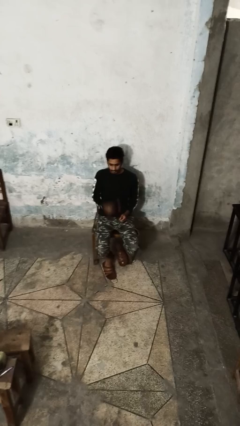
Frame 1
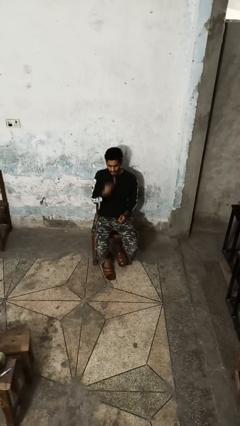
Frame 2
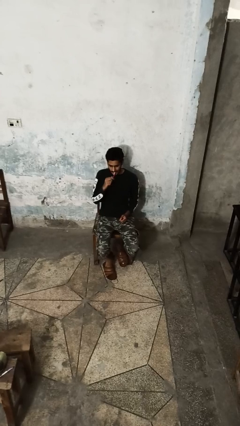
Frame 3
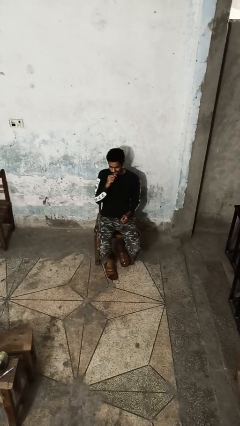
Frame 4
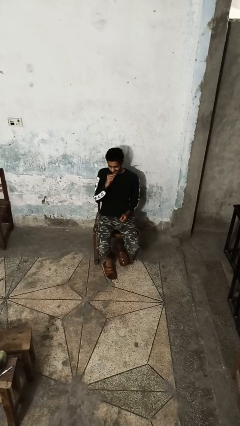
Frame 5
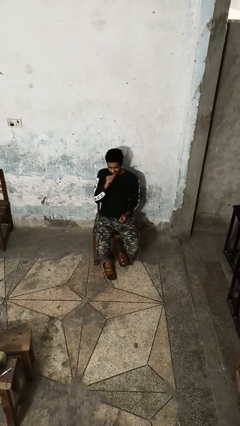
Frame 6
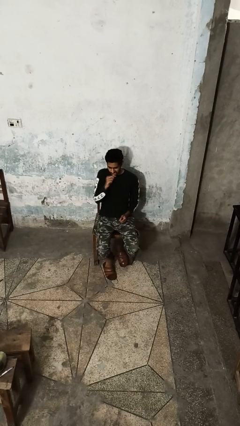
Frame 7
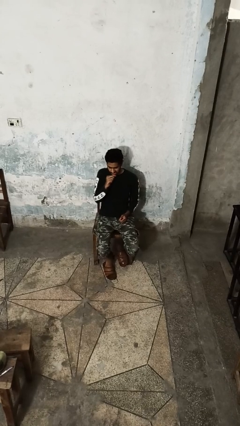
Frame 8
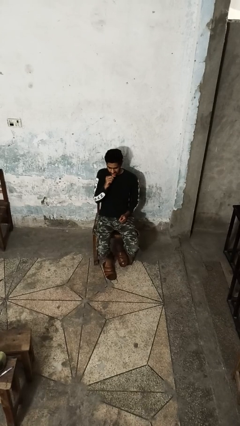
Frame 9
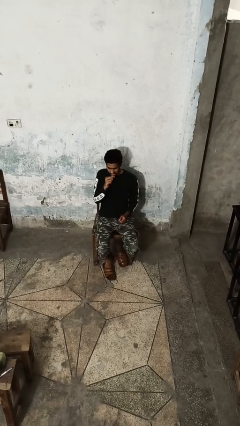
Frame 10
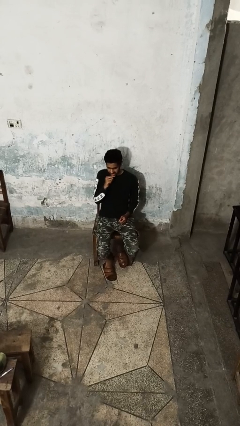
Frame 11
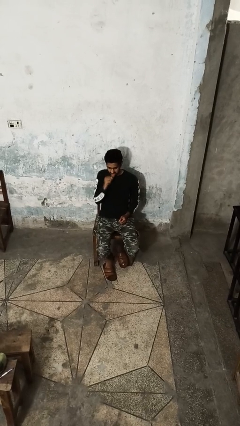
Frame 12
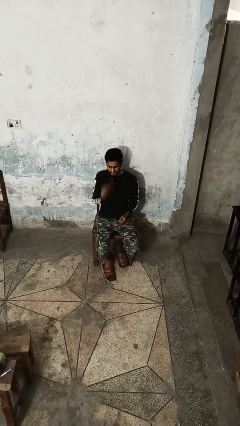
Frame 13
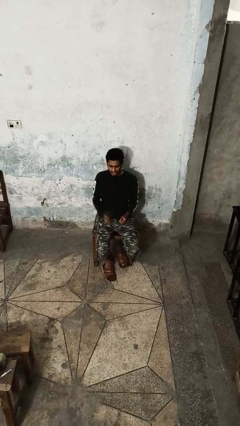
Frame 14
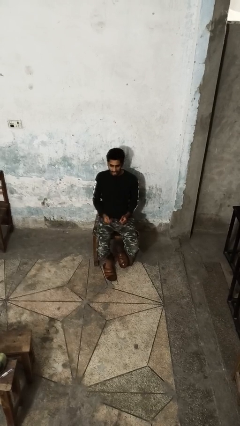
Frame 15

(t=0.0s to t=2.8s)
person brushes teeth

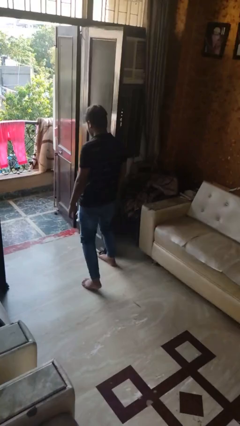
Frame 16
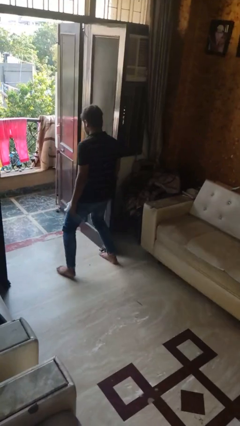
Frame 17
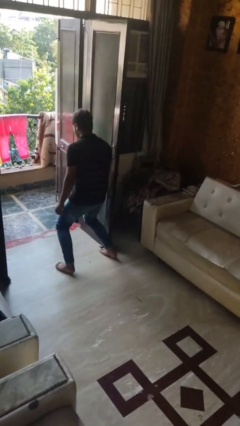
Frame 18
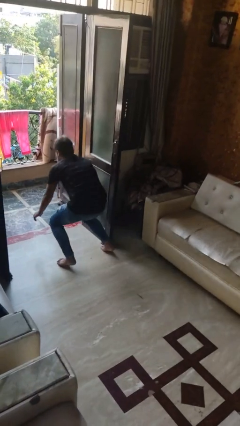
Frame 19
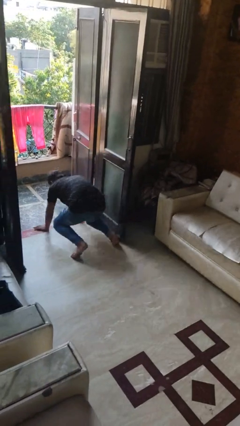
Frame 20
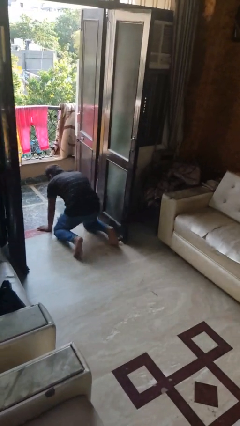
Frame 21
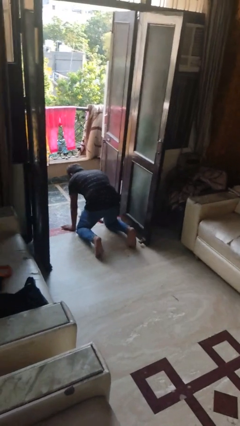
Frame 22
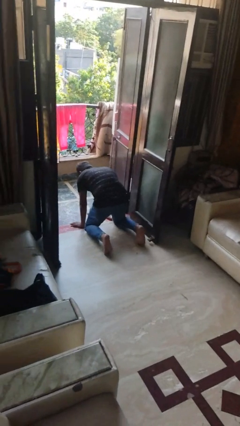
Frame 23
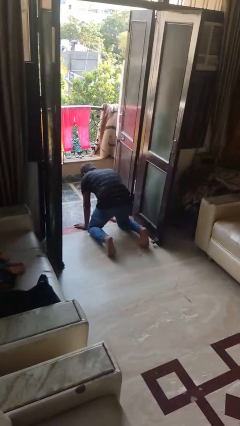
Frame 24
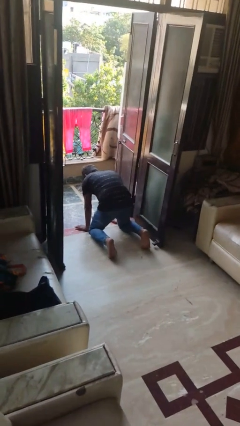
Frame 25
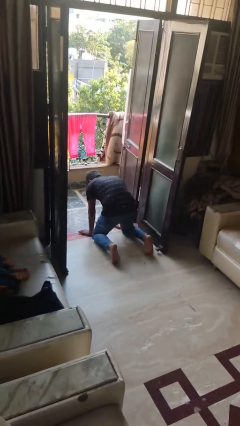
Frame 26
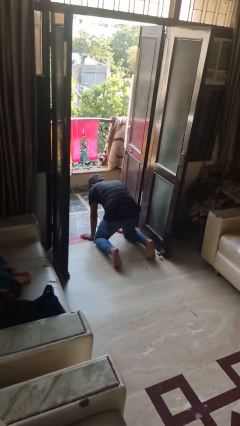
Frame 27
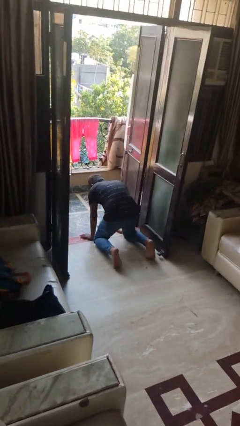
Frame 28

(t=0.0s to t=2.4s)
person trips on object on floor

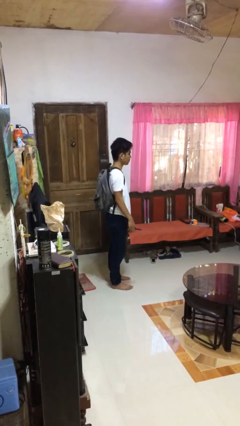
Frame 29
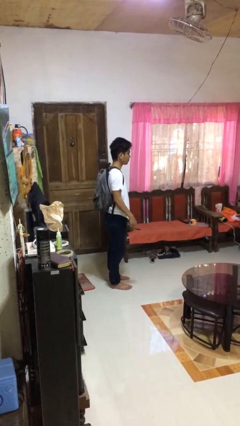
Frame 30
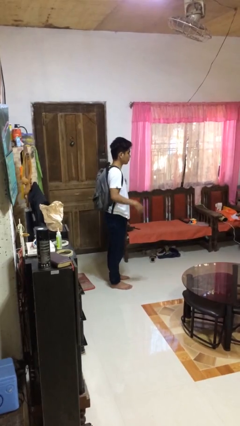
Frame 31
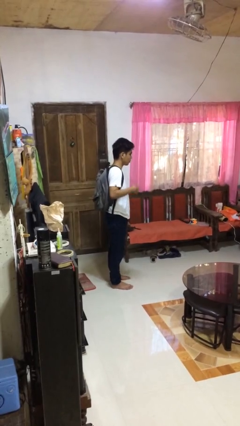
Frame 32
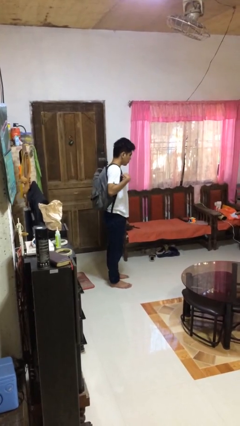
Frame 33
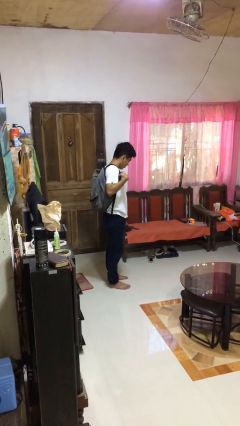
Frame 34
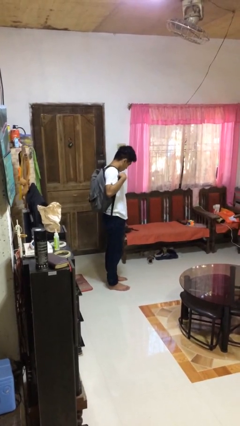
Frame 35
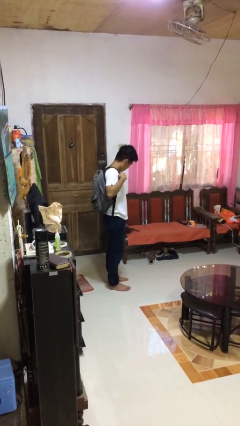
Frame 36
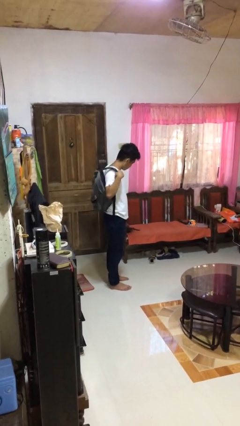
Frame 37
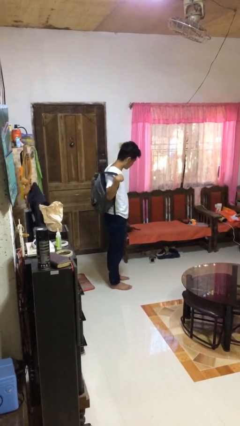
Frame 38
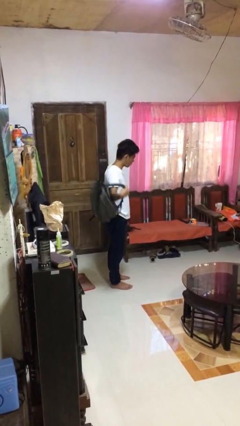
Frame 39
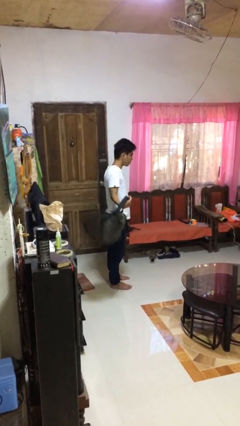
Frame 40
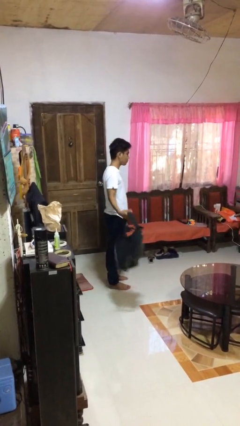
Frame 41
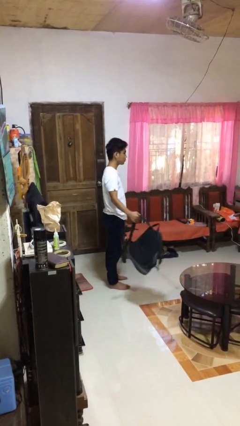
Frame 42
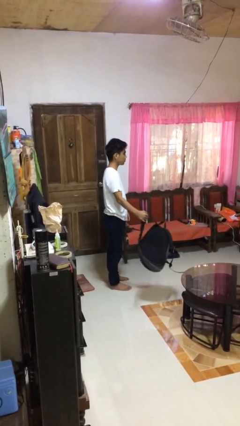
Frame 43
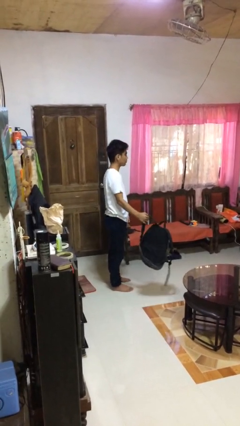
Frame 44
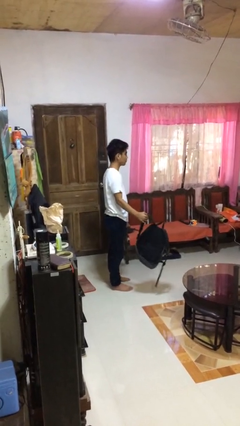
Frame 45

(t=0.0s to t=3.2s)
person takes off backpack

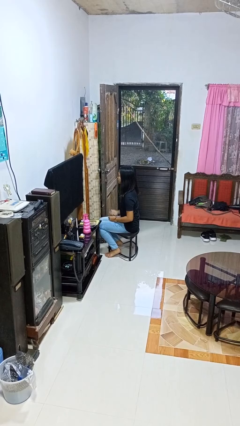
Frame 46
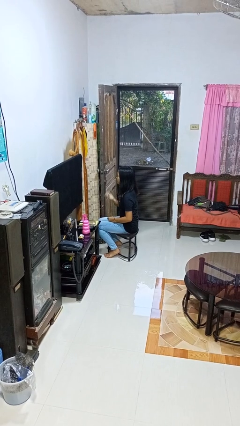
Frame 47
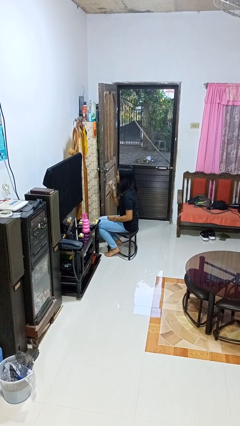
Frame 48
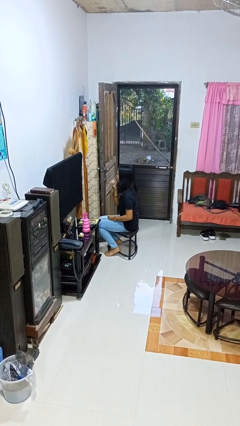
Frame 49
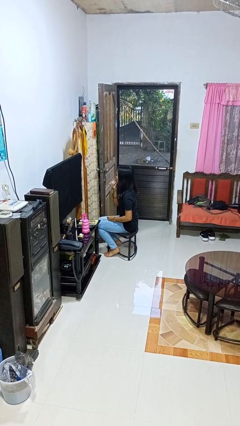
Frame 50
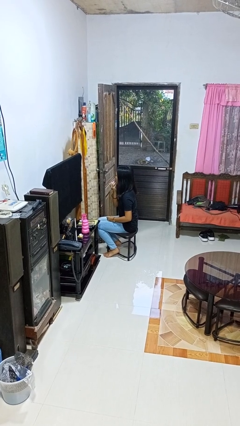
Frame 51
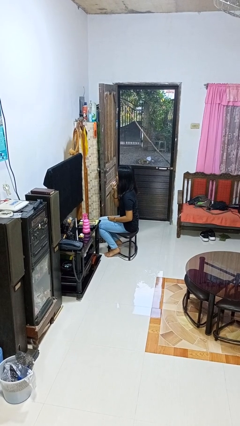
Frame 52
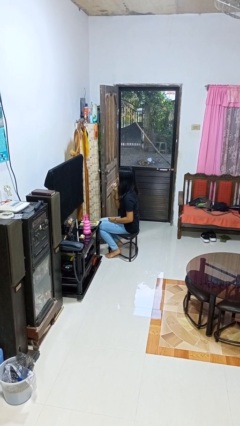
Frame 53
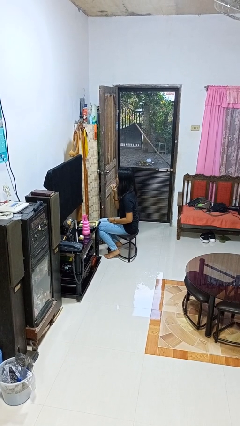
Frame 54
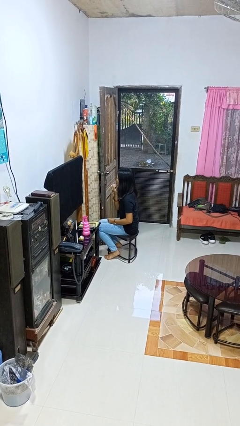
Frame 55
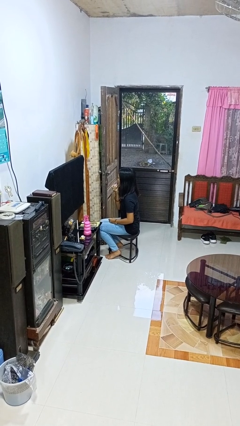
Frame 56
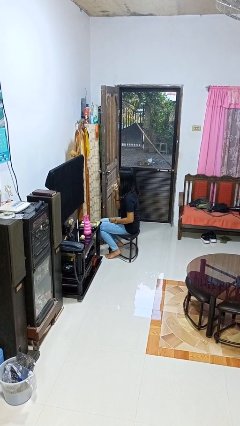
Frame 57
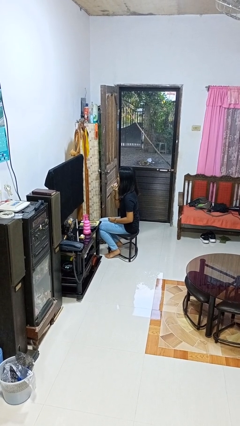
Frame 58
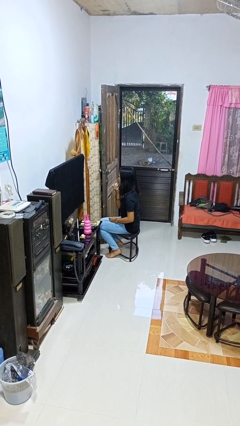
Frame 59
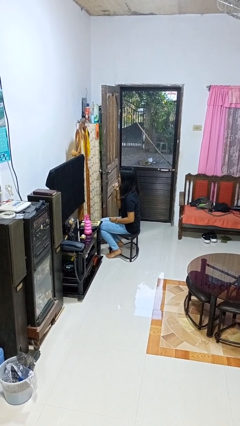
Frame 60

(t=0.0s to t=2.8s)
person applies lip makeup

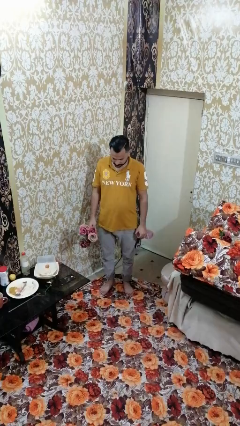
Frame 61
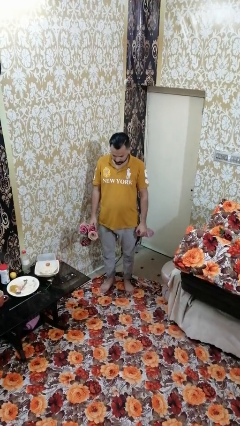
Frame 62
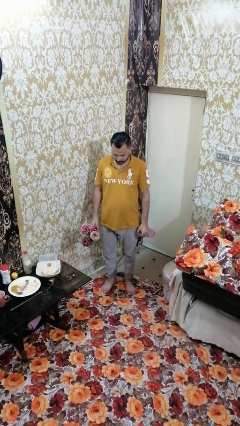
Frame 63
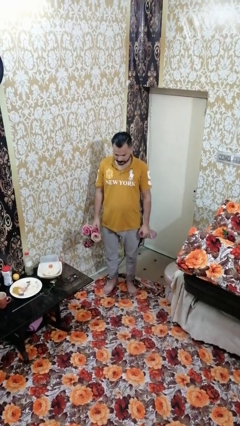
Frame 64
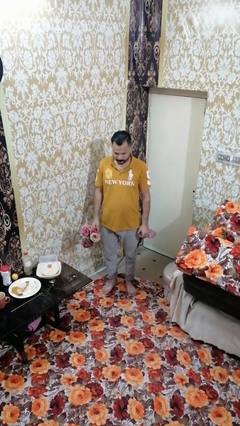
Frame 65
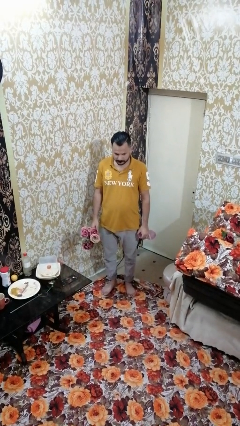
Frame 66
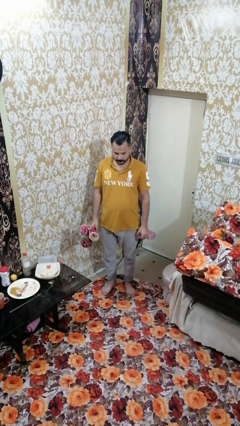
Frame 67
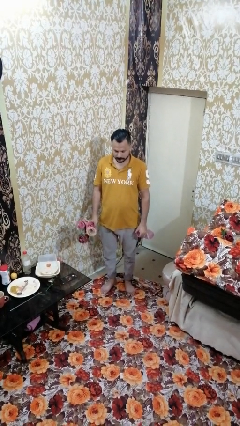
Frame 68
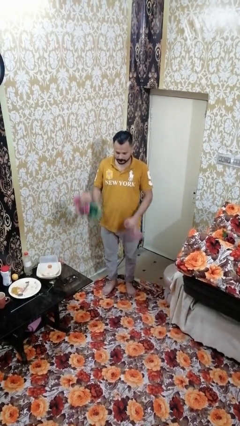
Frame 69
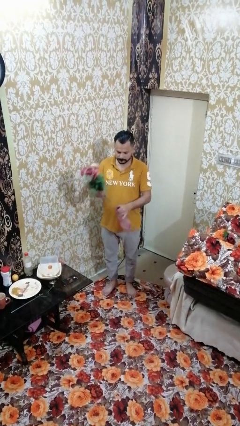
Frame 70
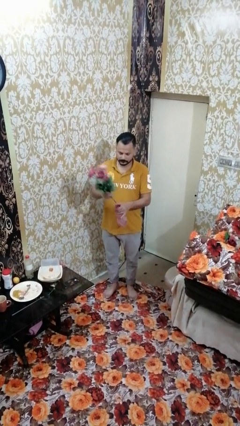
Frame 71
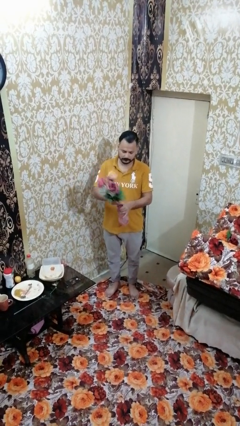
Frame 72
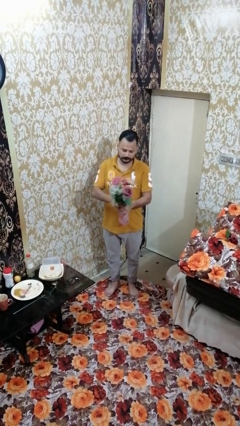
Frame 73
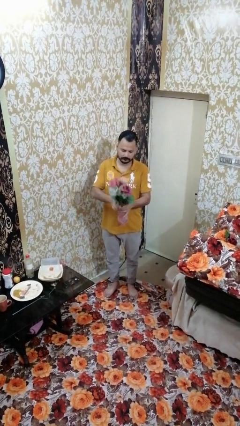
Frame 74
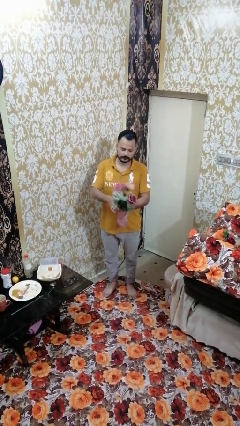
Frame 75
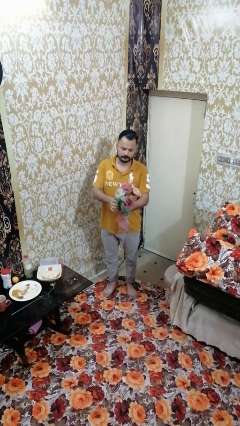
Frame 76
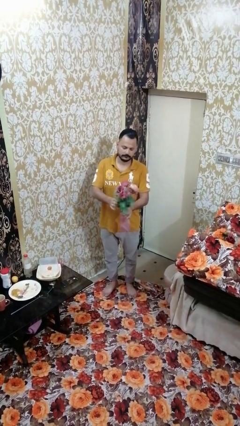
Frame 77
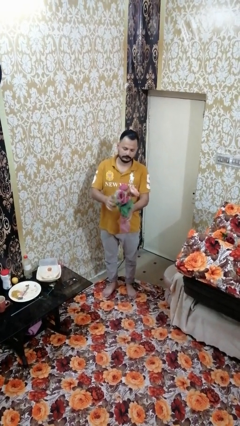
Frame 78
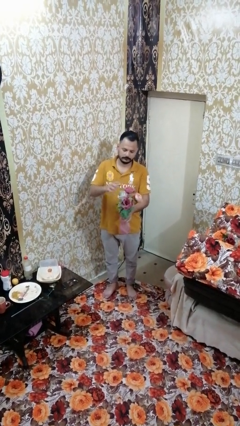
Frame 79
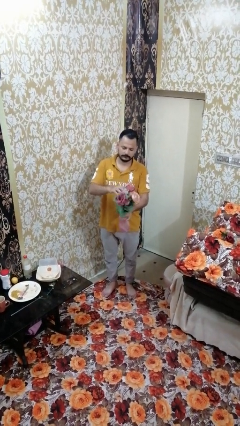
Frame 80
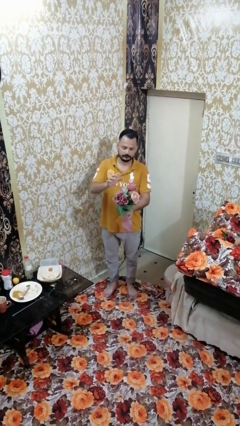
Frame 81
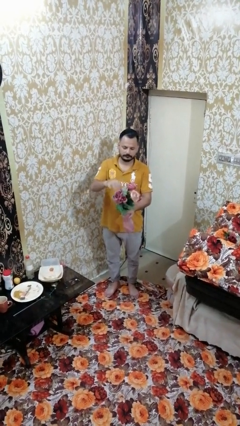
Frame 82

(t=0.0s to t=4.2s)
person arranges flowers in vase

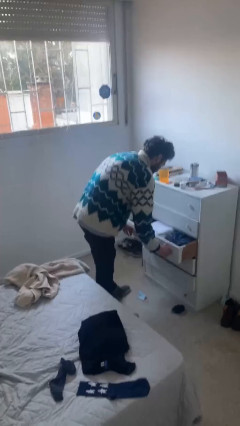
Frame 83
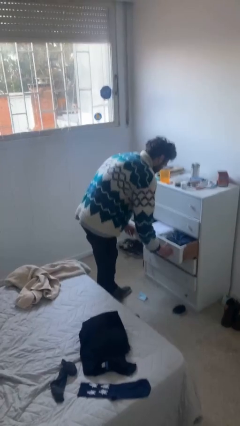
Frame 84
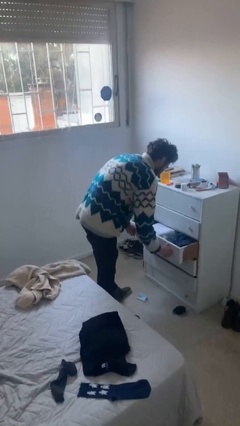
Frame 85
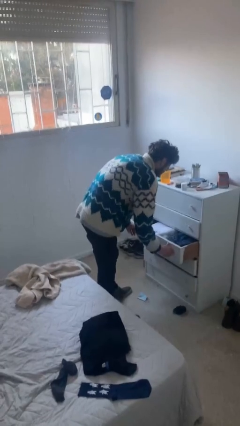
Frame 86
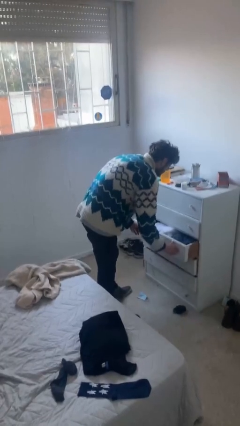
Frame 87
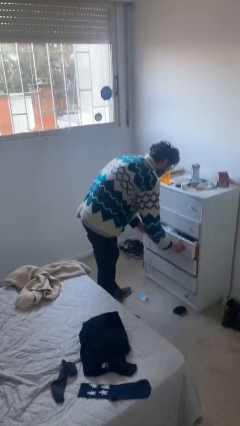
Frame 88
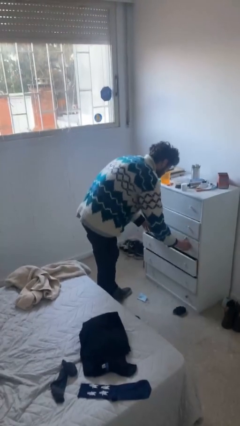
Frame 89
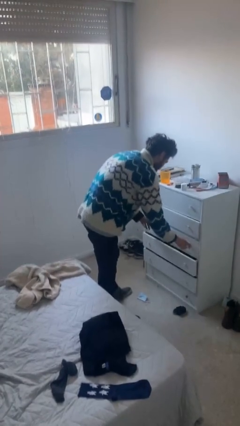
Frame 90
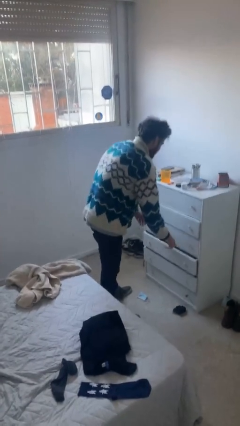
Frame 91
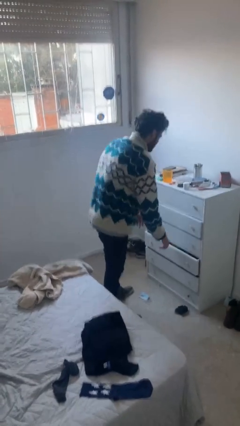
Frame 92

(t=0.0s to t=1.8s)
person closes dresser drawer
